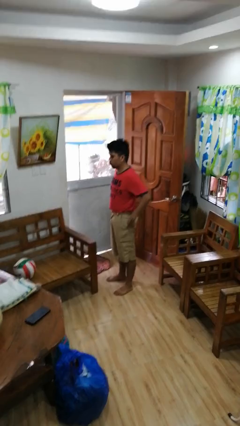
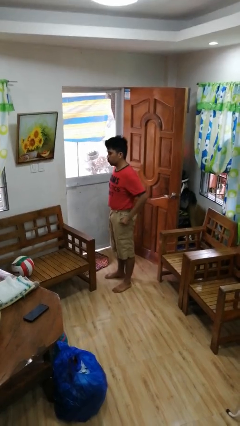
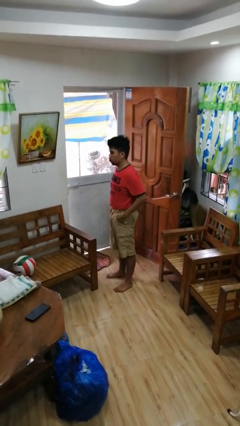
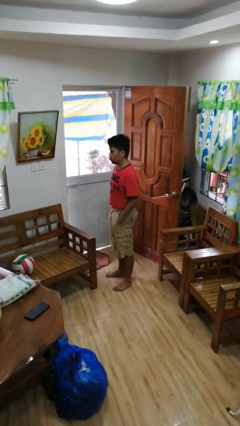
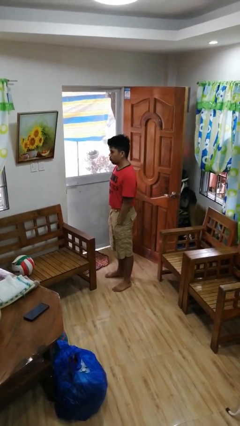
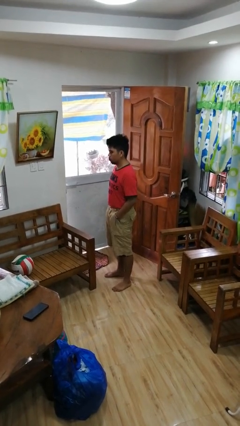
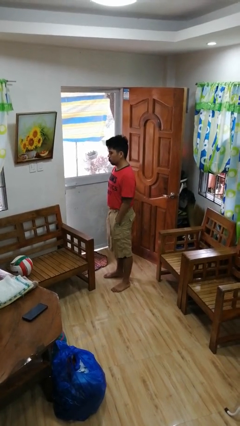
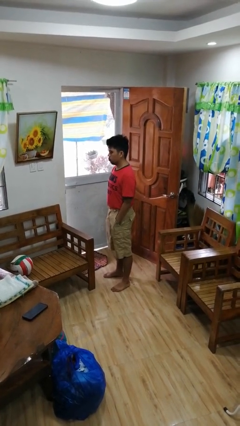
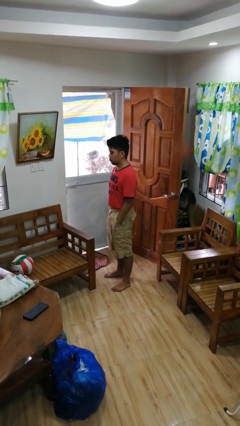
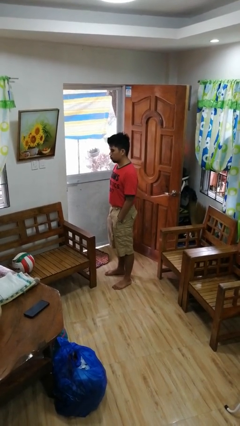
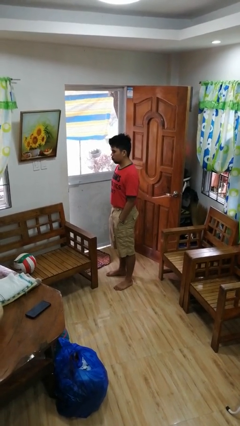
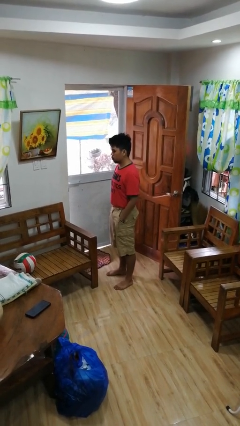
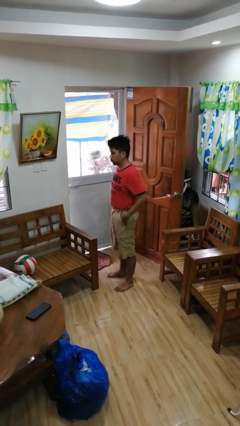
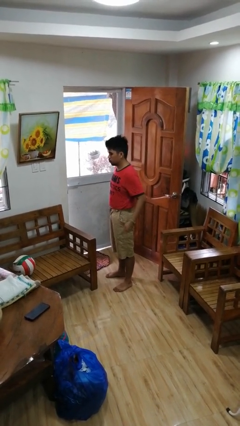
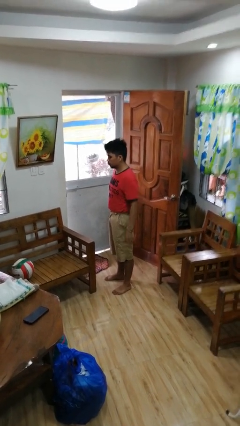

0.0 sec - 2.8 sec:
person puts hands in back pockets

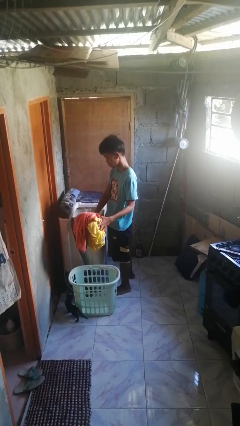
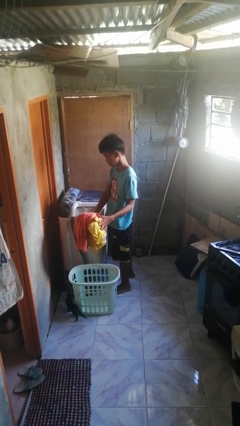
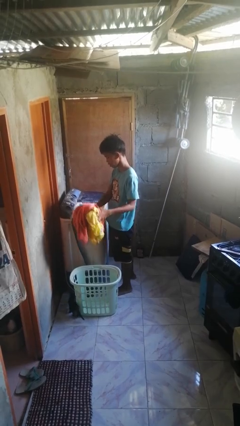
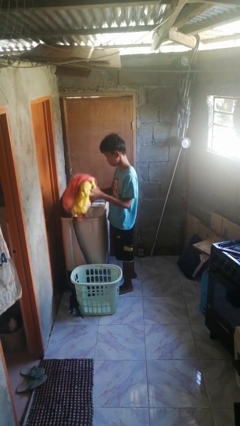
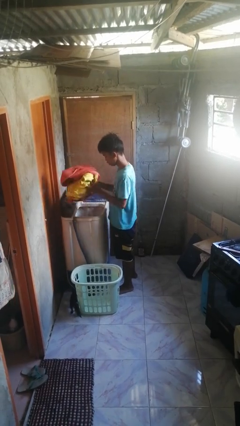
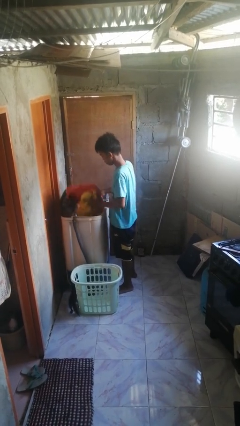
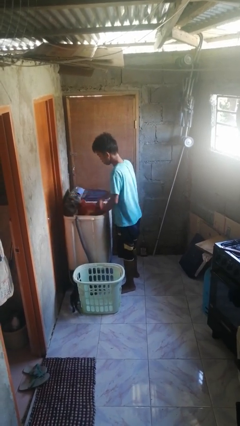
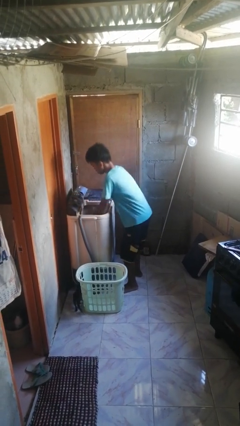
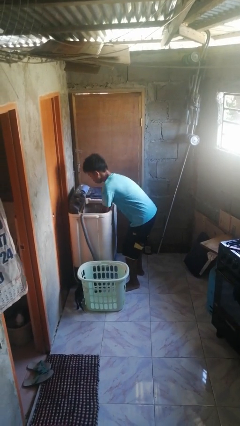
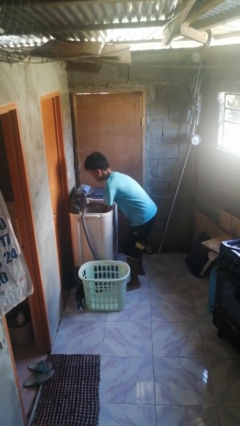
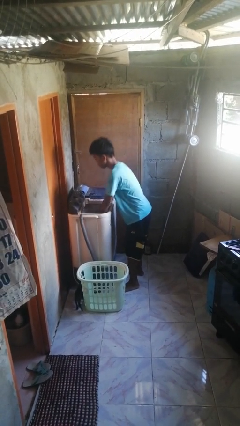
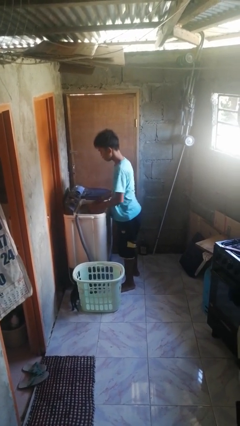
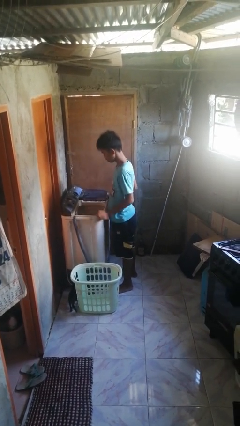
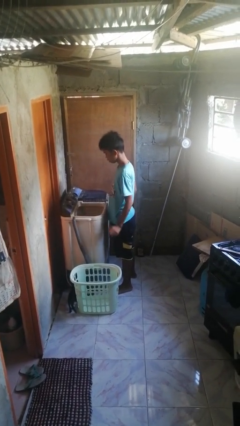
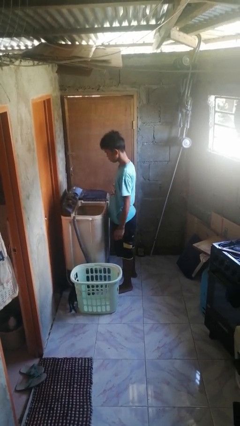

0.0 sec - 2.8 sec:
person loads clotheswasher

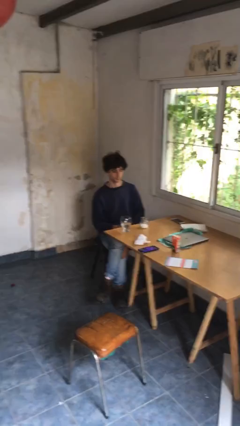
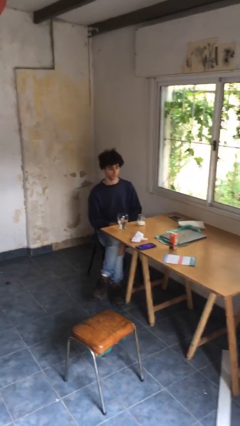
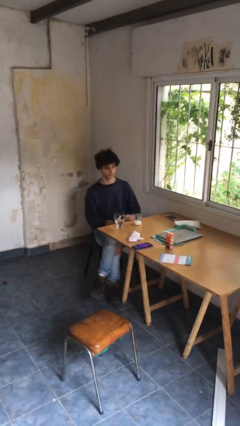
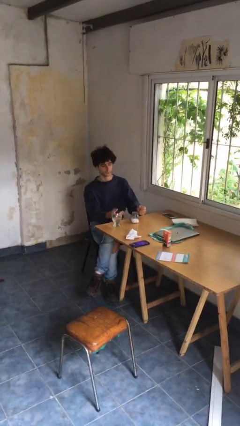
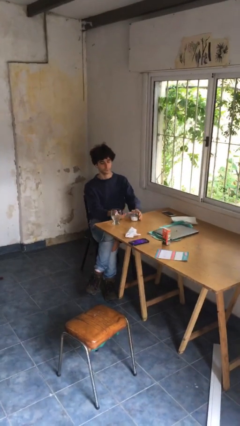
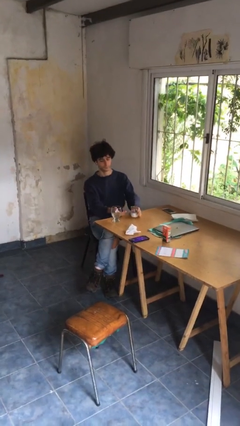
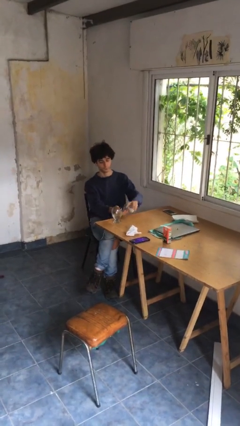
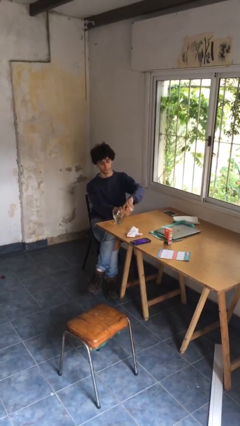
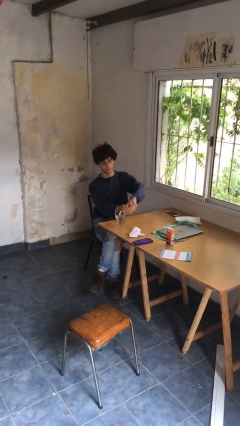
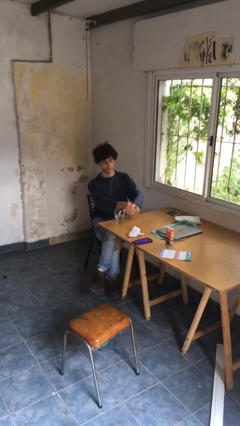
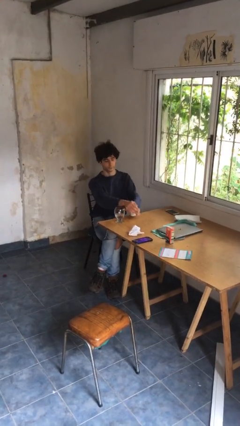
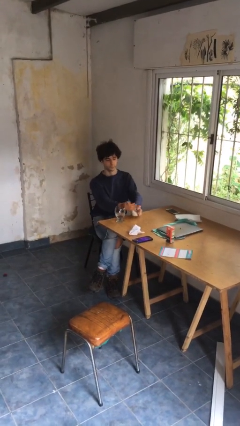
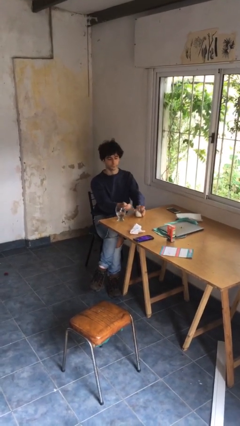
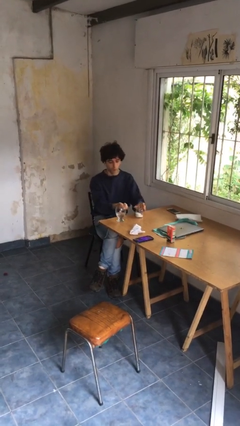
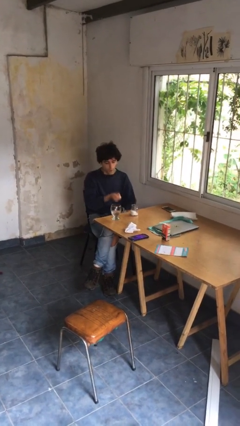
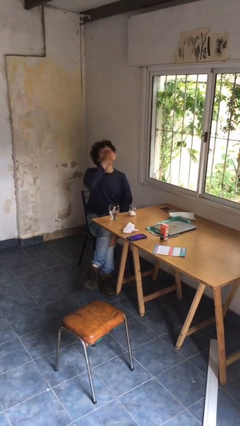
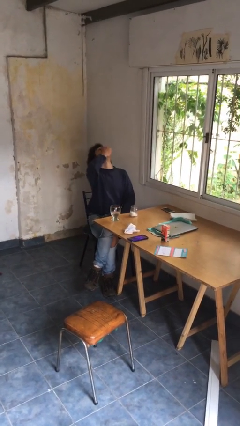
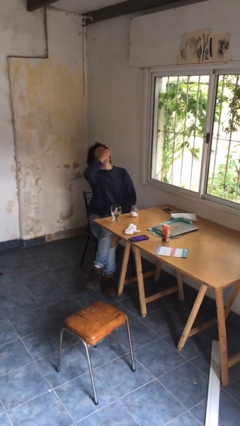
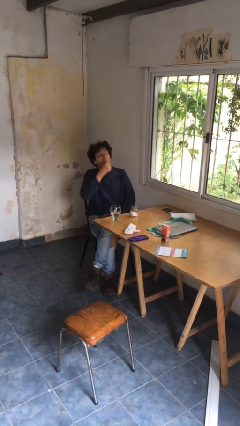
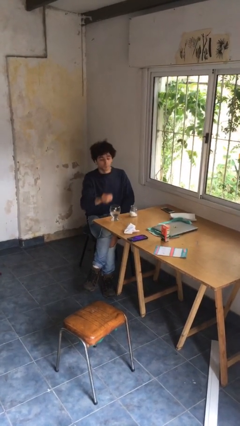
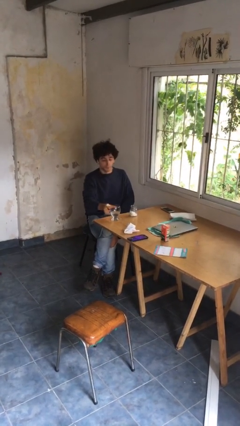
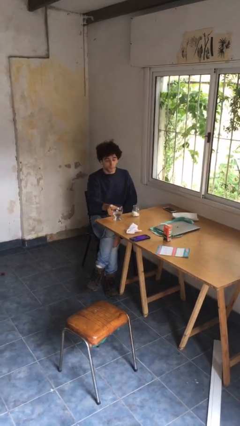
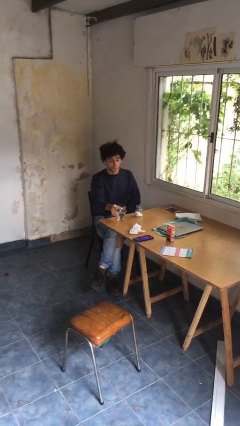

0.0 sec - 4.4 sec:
person takes medicine pills

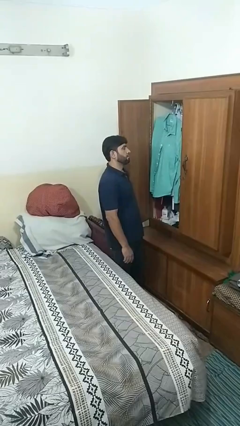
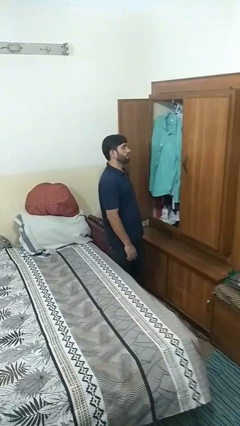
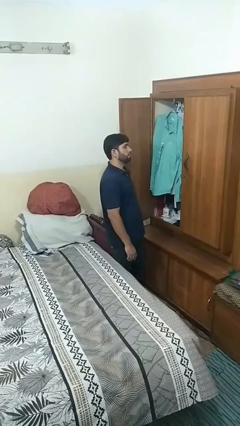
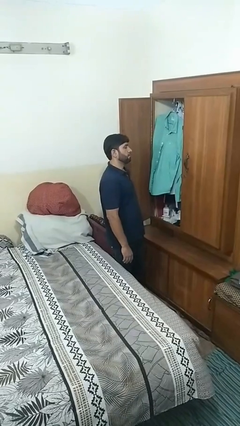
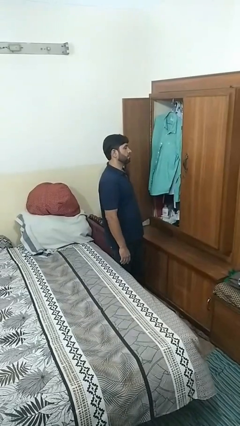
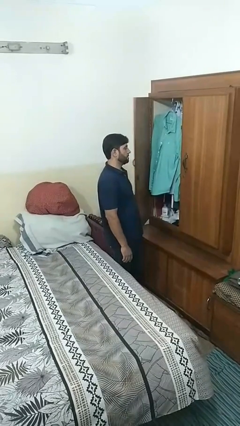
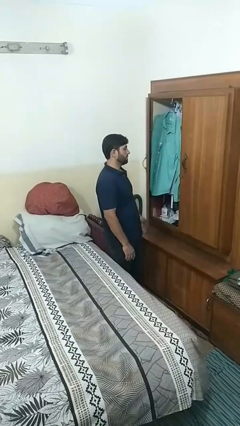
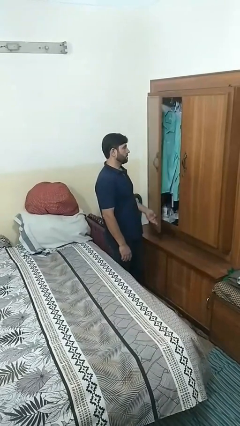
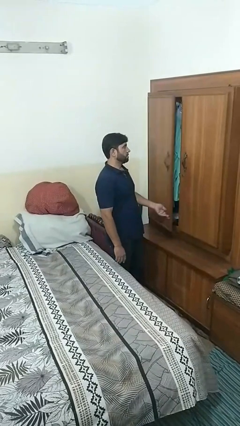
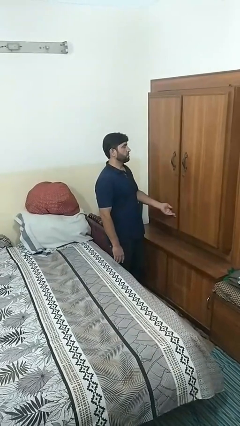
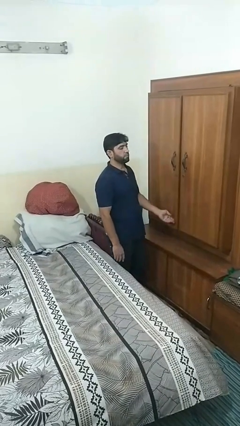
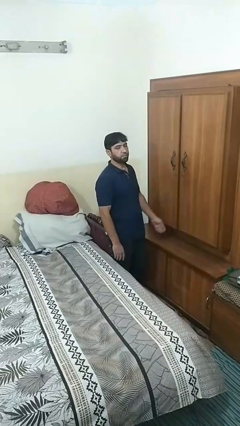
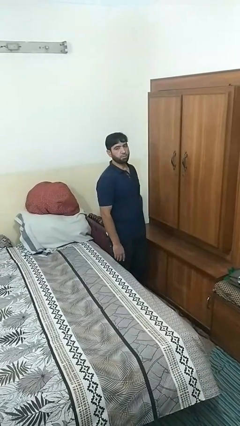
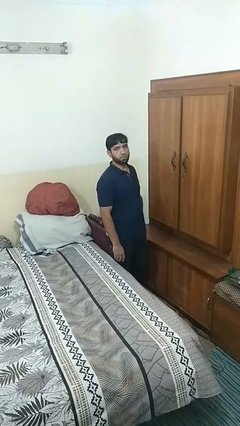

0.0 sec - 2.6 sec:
person closes closet door

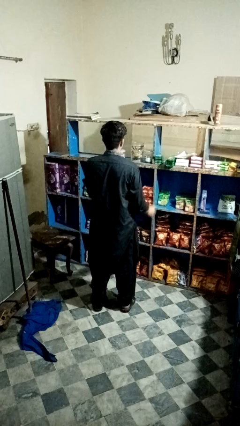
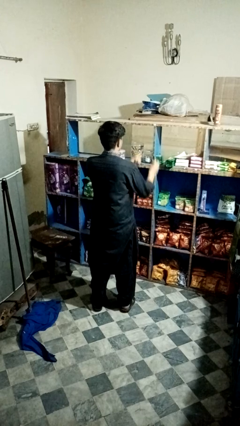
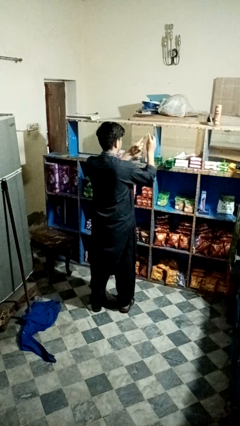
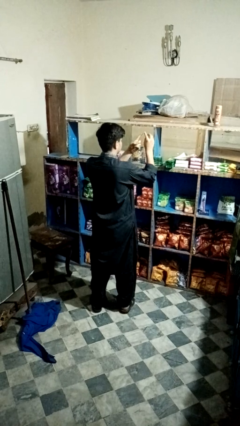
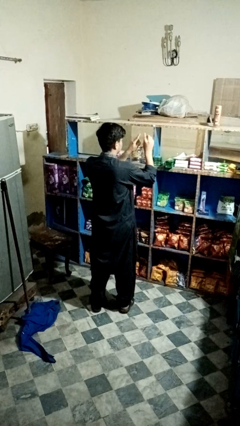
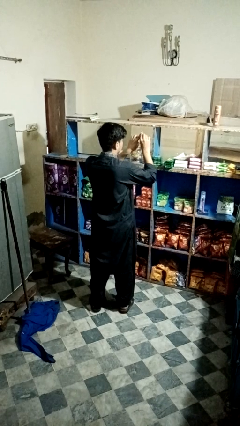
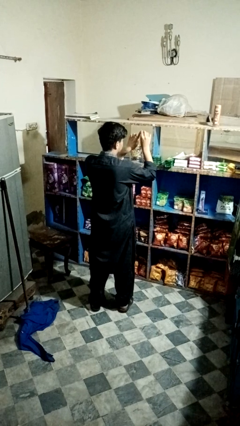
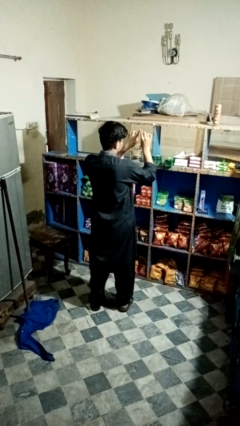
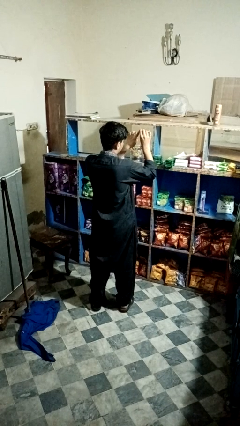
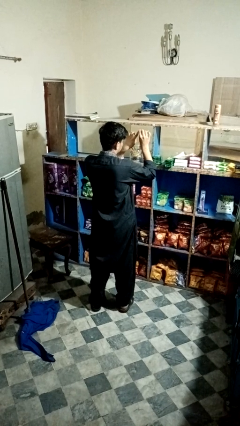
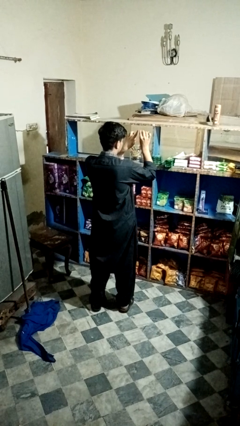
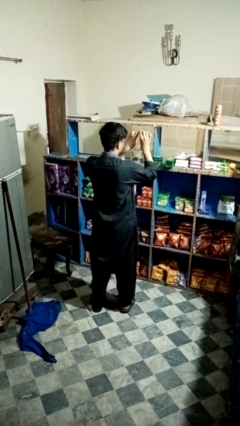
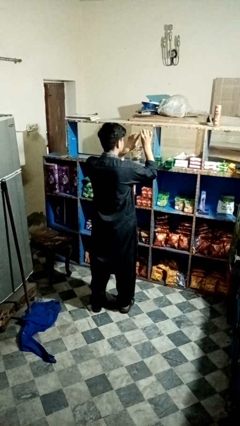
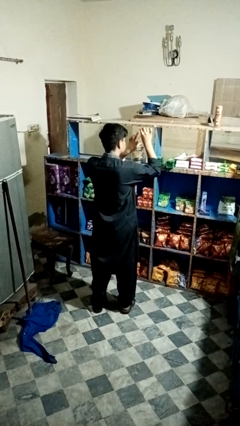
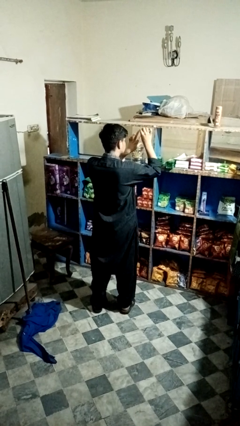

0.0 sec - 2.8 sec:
person files fingernails

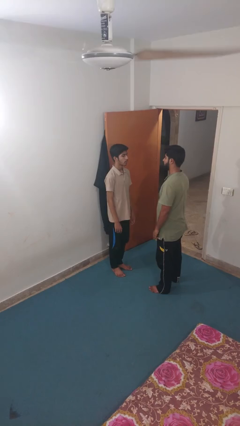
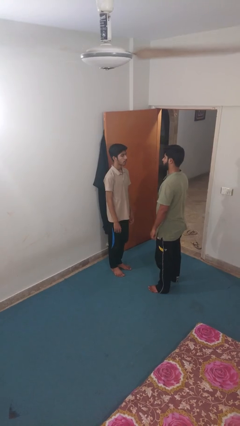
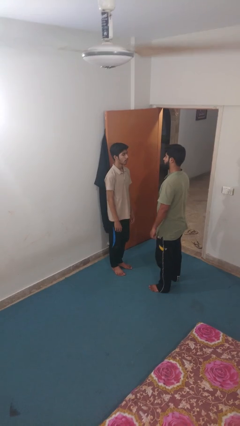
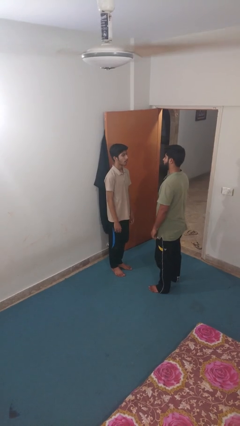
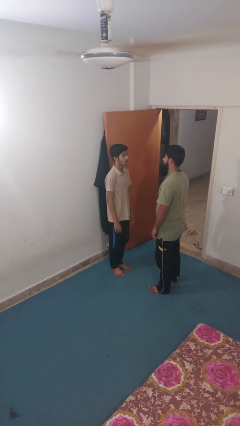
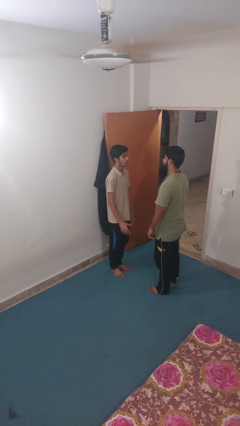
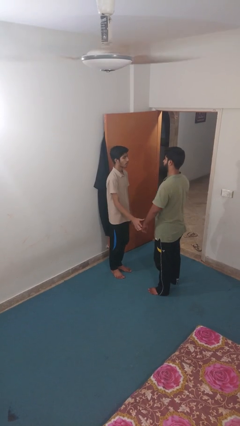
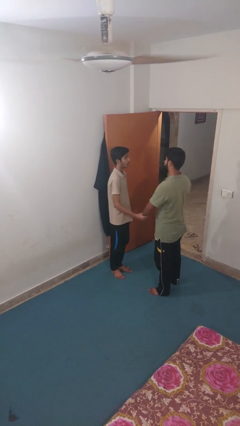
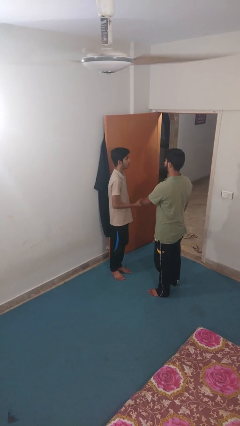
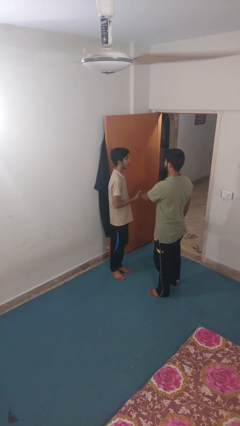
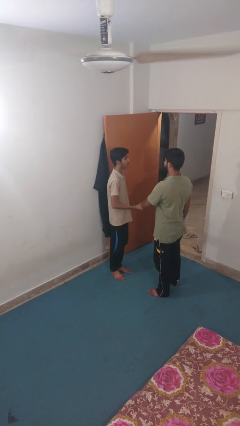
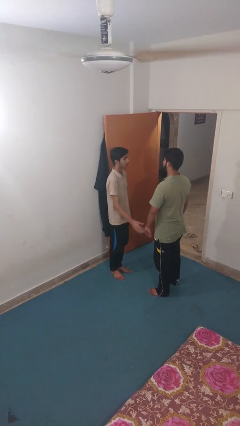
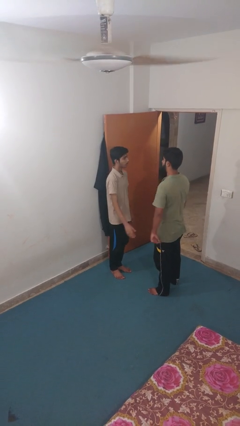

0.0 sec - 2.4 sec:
person grabs person by forearm
